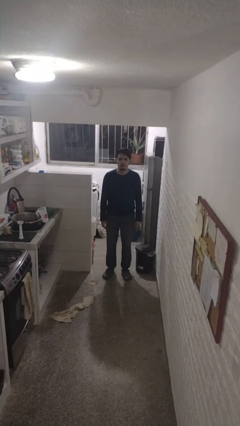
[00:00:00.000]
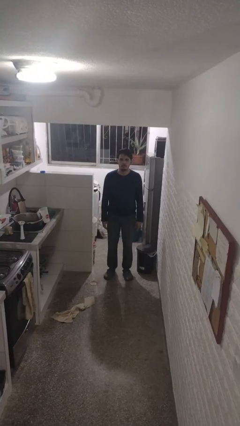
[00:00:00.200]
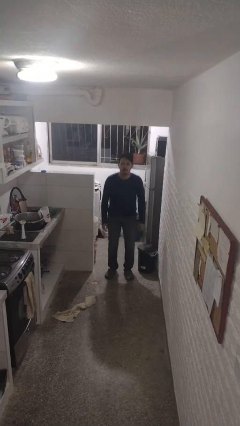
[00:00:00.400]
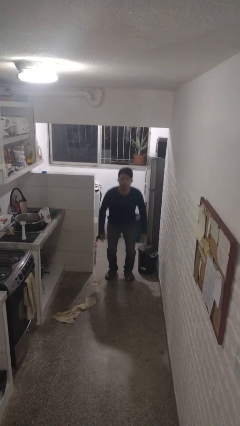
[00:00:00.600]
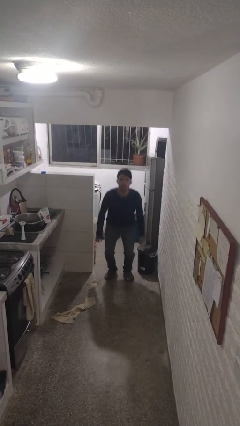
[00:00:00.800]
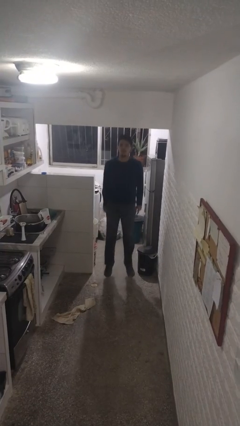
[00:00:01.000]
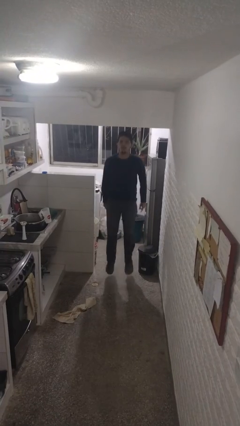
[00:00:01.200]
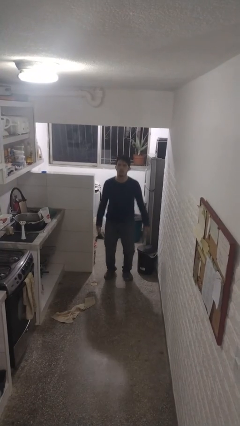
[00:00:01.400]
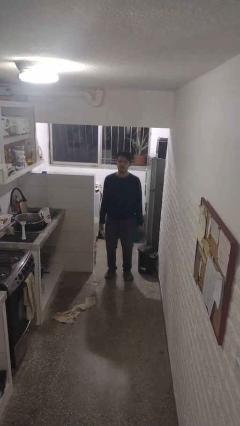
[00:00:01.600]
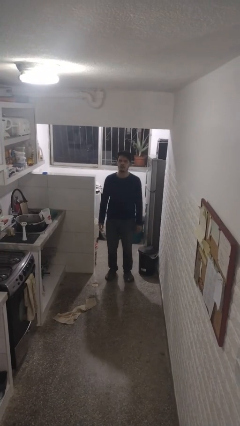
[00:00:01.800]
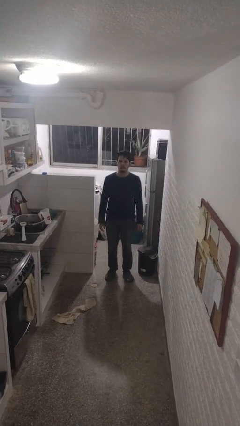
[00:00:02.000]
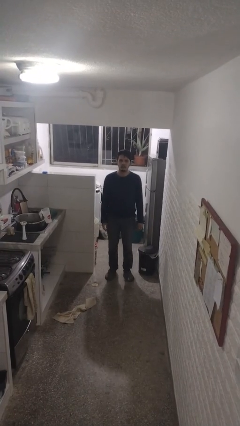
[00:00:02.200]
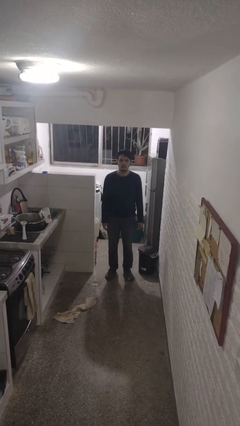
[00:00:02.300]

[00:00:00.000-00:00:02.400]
person jumps

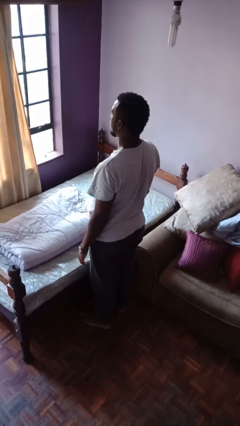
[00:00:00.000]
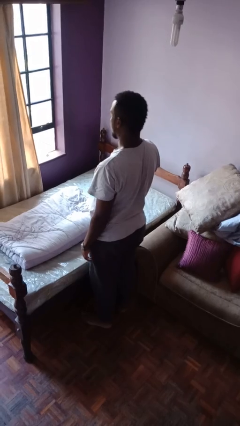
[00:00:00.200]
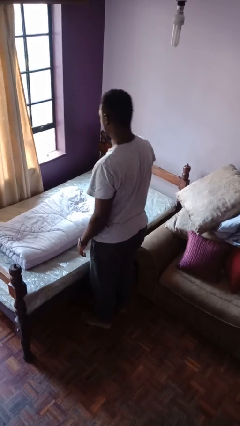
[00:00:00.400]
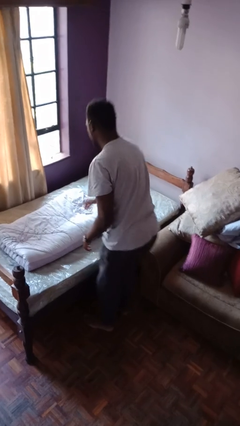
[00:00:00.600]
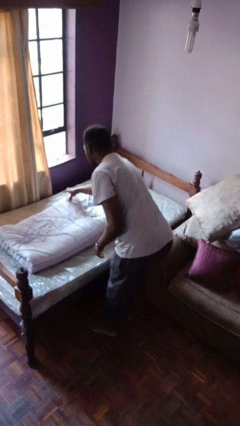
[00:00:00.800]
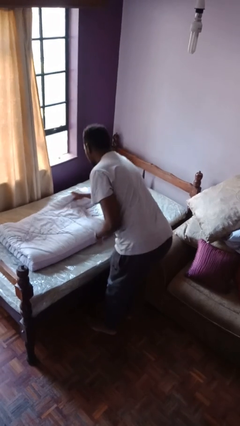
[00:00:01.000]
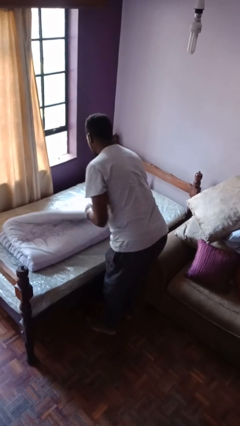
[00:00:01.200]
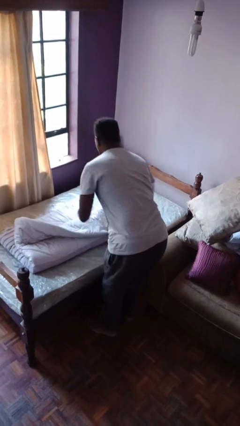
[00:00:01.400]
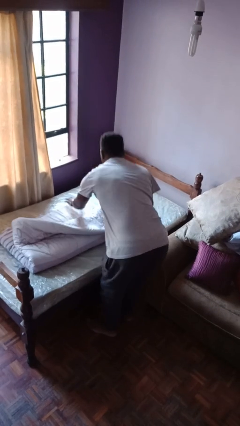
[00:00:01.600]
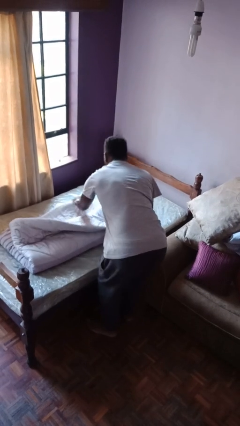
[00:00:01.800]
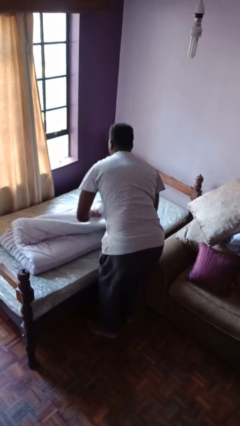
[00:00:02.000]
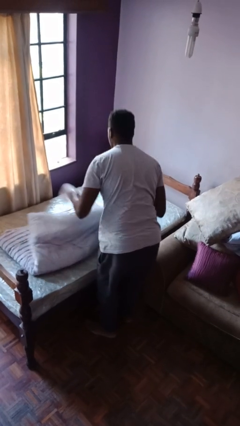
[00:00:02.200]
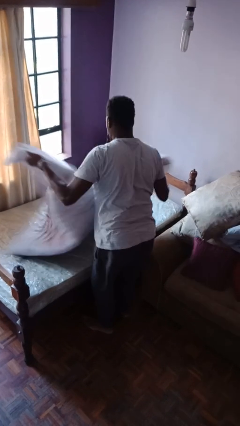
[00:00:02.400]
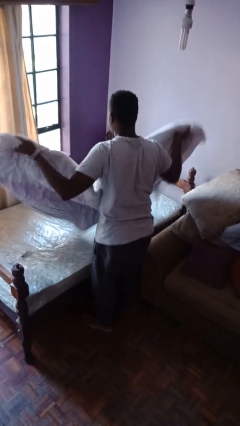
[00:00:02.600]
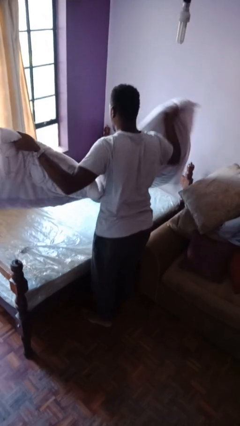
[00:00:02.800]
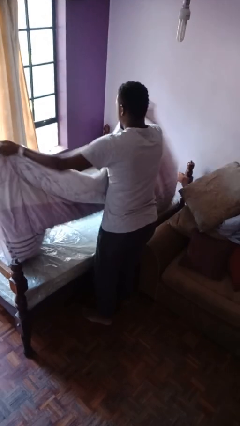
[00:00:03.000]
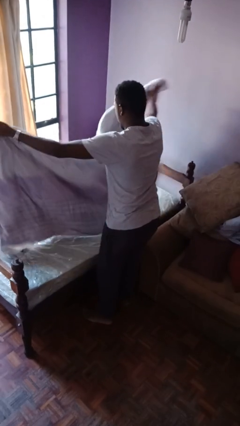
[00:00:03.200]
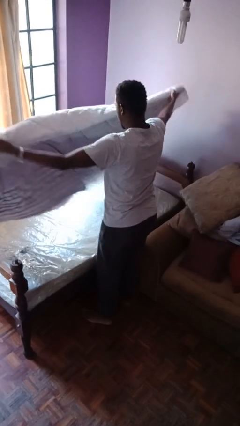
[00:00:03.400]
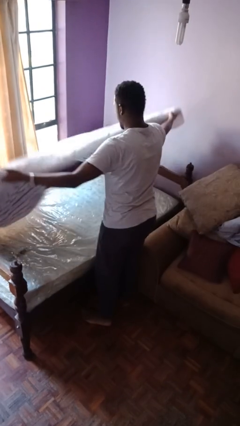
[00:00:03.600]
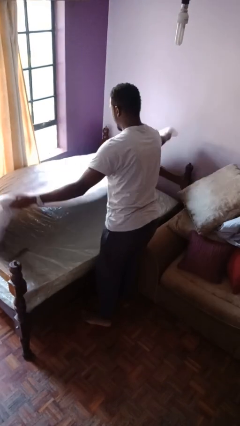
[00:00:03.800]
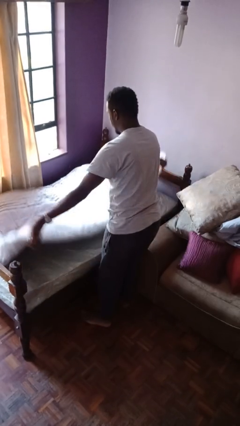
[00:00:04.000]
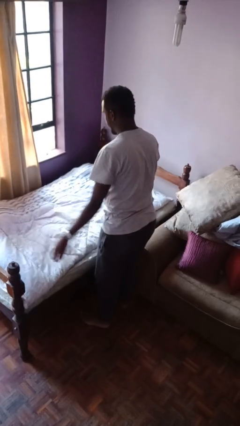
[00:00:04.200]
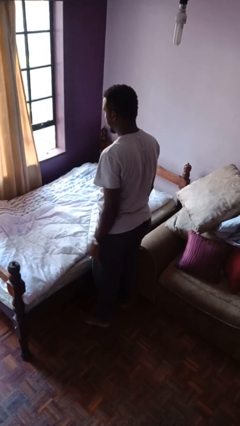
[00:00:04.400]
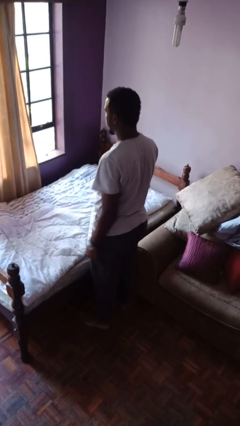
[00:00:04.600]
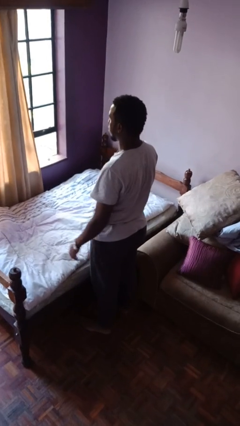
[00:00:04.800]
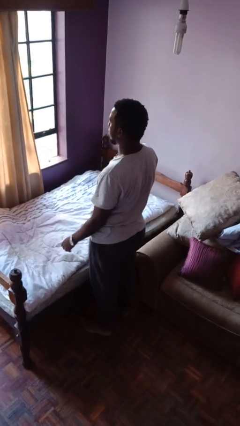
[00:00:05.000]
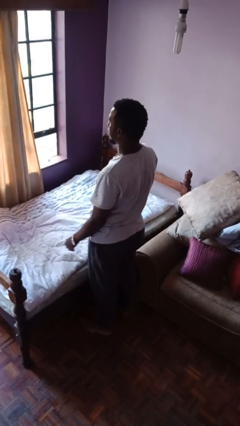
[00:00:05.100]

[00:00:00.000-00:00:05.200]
person unfolds blanket

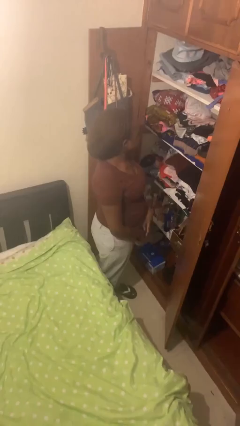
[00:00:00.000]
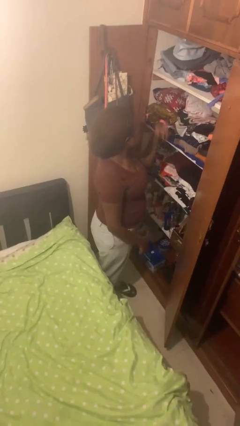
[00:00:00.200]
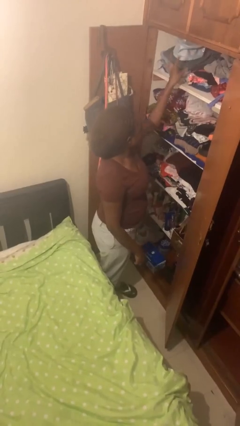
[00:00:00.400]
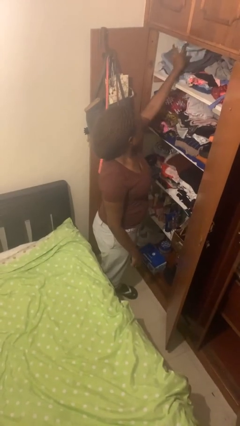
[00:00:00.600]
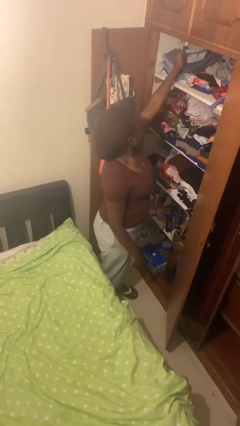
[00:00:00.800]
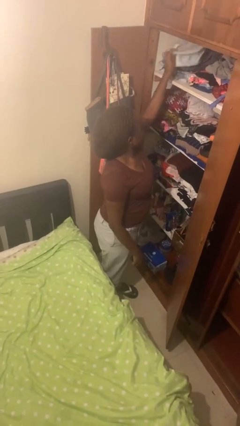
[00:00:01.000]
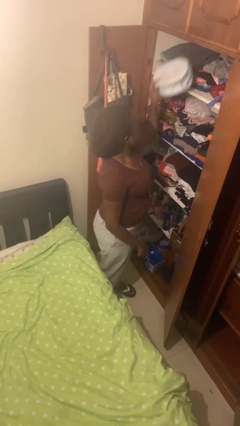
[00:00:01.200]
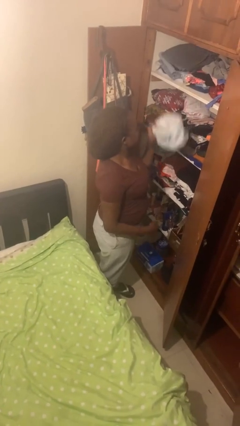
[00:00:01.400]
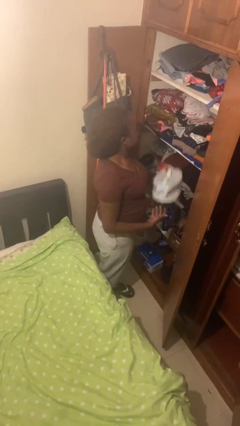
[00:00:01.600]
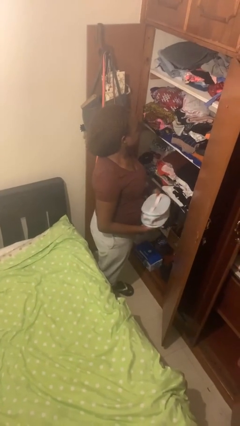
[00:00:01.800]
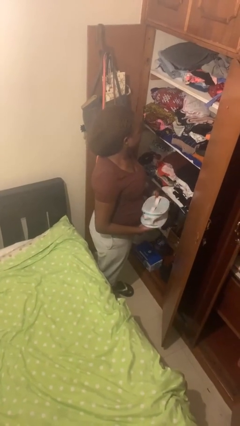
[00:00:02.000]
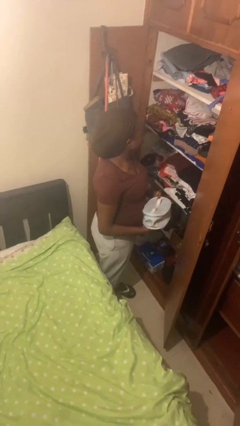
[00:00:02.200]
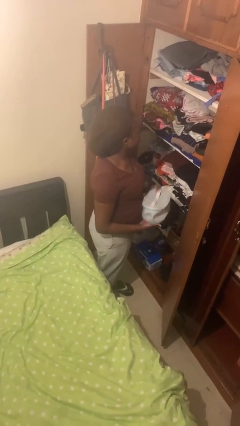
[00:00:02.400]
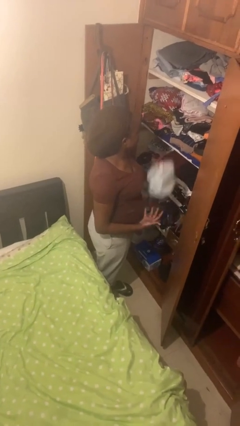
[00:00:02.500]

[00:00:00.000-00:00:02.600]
person picks up object from shelf

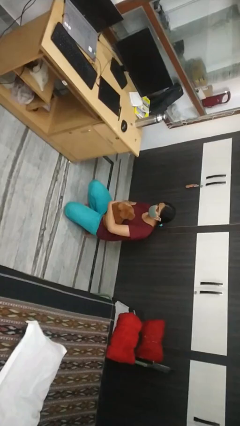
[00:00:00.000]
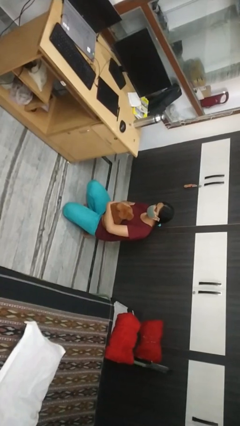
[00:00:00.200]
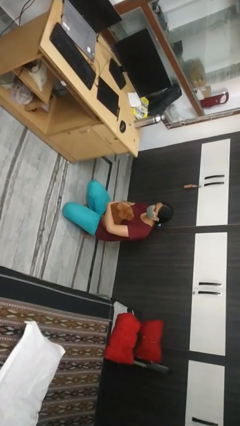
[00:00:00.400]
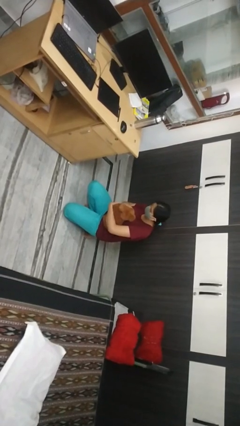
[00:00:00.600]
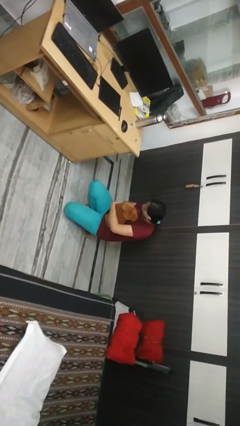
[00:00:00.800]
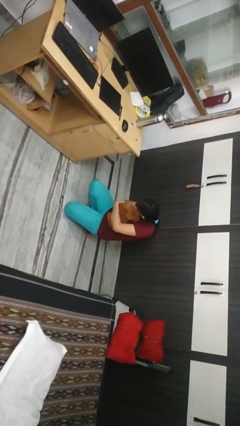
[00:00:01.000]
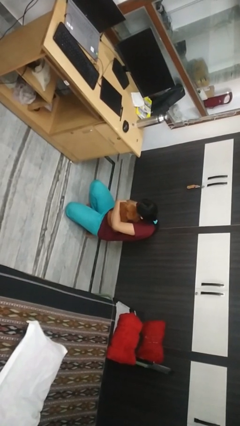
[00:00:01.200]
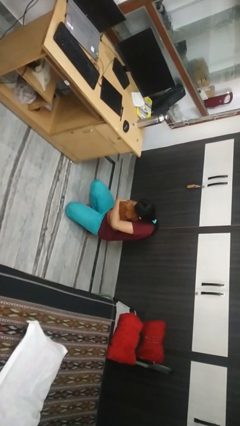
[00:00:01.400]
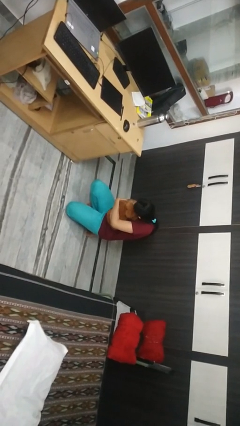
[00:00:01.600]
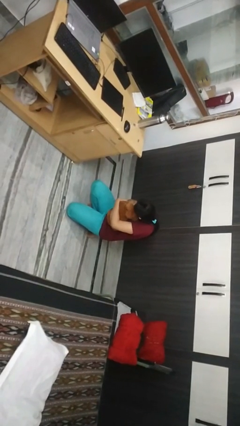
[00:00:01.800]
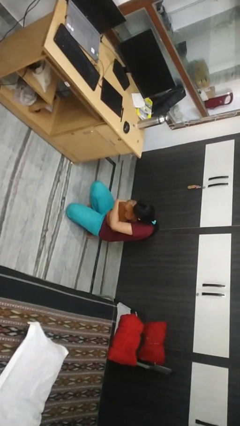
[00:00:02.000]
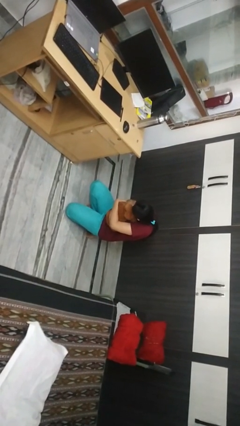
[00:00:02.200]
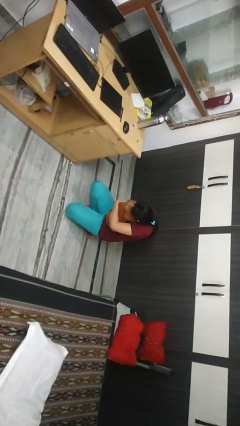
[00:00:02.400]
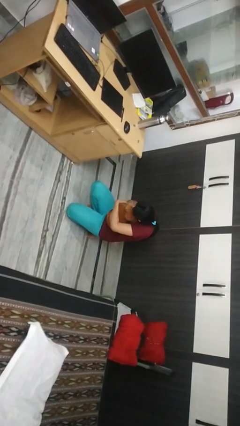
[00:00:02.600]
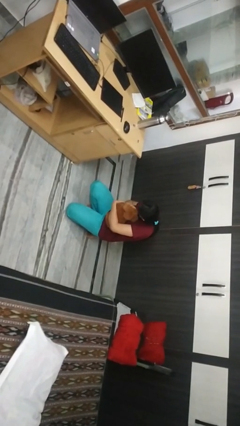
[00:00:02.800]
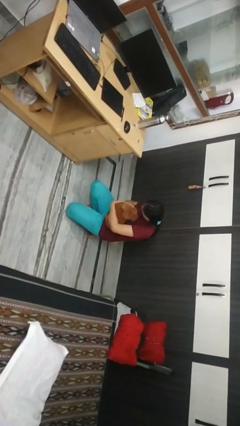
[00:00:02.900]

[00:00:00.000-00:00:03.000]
person hugs dog

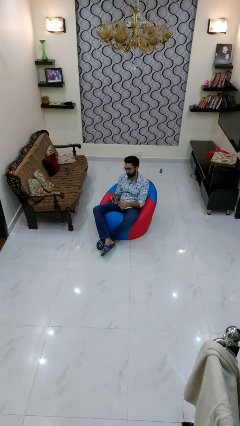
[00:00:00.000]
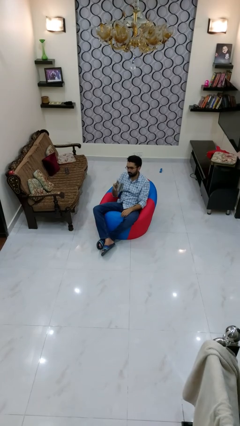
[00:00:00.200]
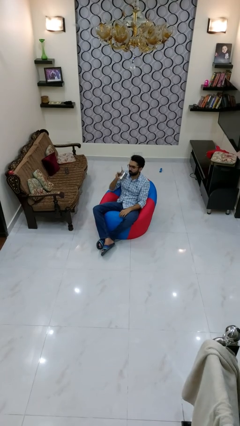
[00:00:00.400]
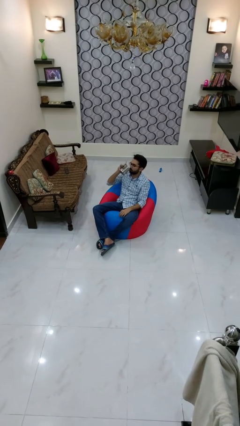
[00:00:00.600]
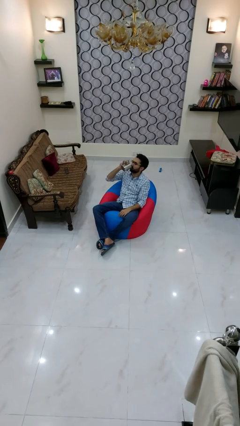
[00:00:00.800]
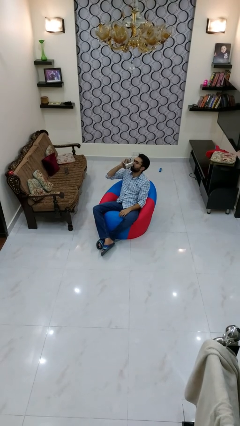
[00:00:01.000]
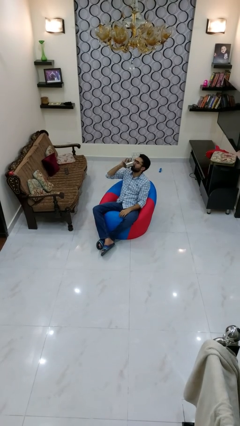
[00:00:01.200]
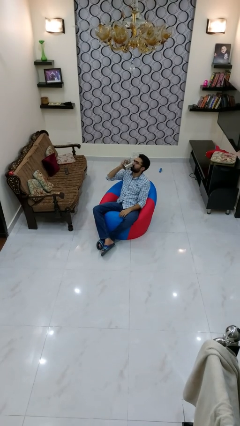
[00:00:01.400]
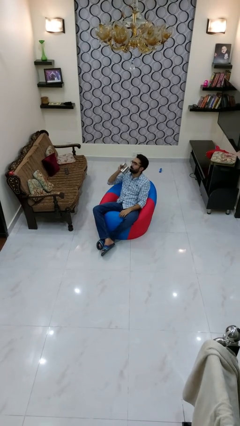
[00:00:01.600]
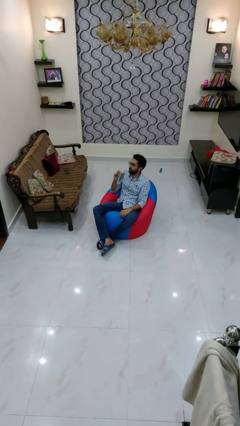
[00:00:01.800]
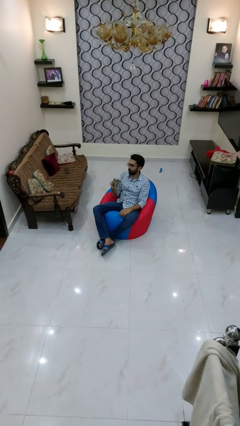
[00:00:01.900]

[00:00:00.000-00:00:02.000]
person drinks from mug

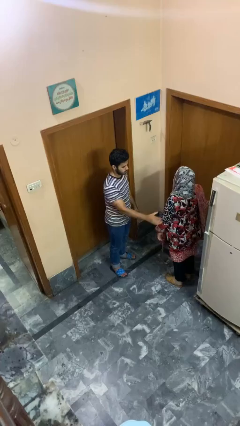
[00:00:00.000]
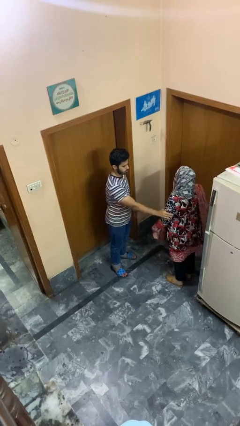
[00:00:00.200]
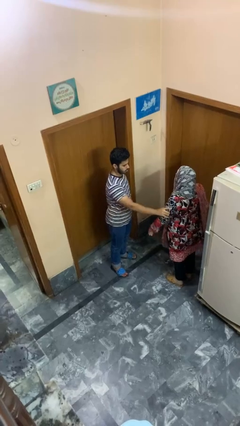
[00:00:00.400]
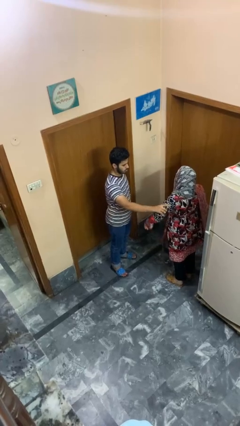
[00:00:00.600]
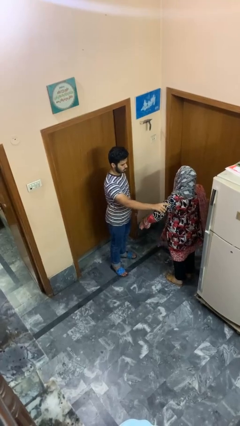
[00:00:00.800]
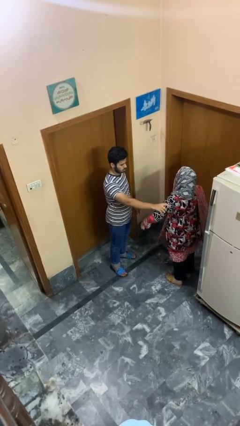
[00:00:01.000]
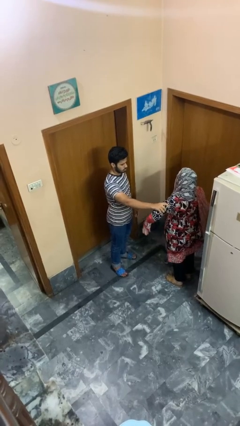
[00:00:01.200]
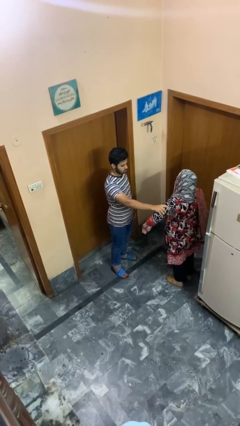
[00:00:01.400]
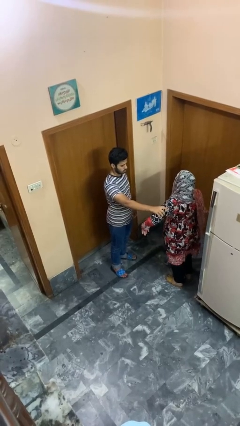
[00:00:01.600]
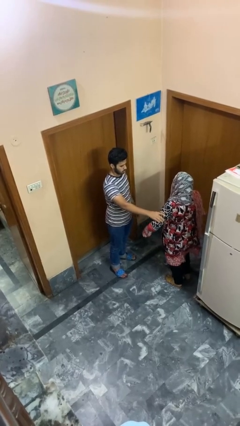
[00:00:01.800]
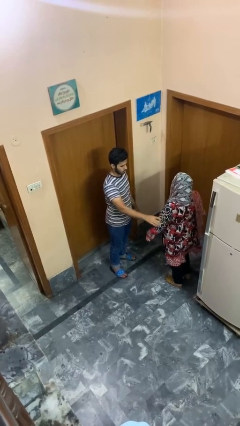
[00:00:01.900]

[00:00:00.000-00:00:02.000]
person grabs person by bicep

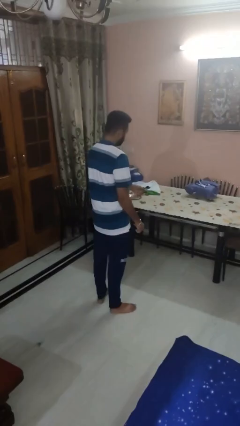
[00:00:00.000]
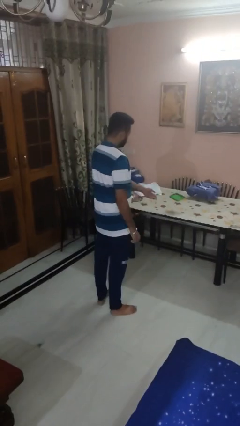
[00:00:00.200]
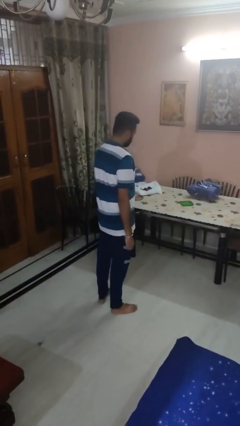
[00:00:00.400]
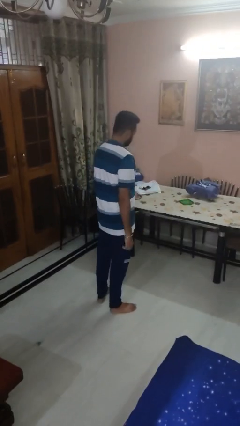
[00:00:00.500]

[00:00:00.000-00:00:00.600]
person throws object on table
